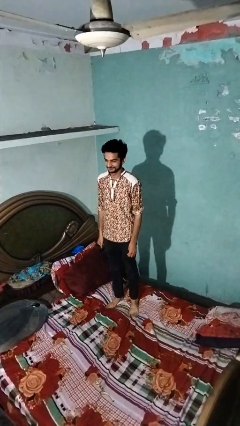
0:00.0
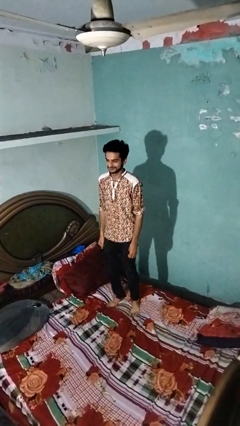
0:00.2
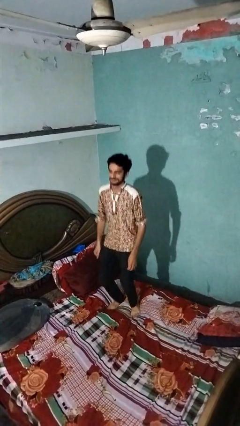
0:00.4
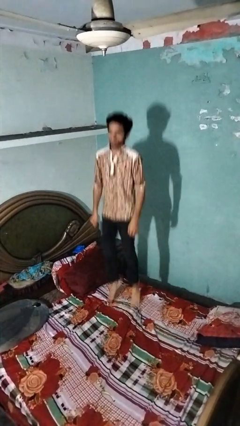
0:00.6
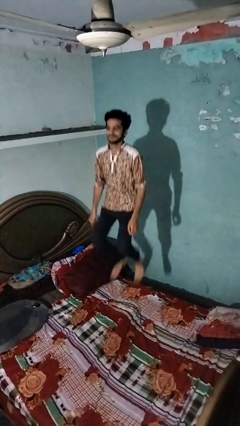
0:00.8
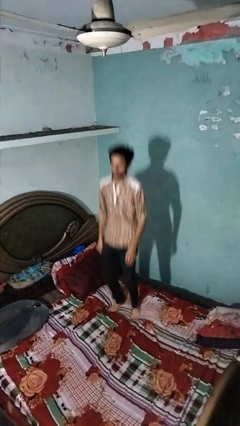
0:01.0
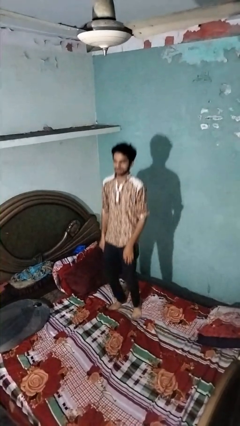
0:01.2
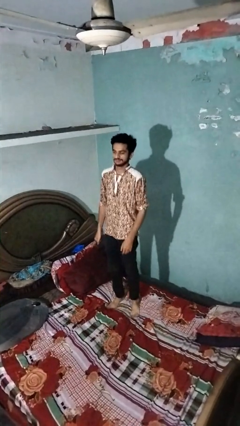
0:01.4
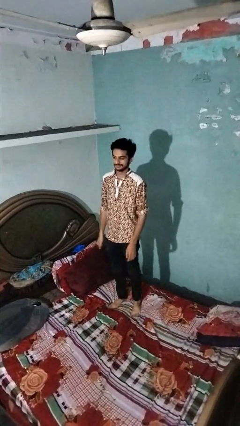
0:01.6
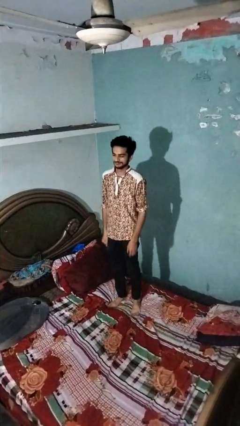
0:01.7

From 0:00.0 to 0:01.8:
person jumps on bed

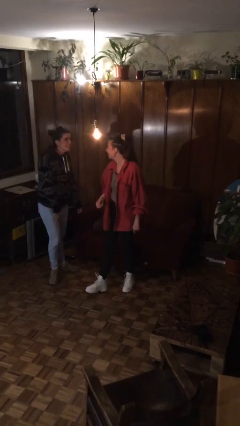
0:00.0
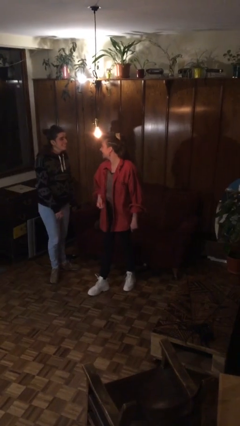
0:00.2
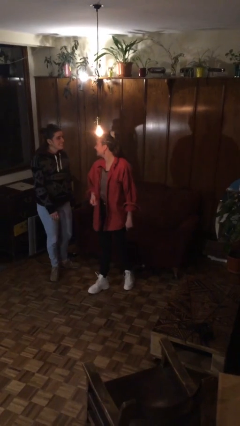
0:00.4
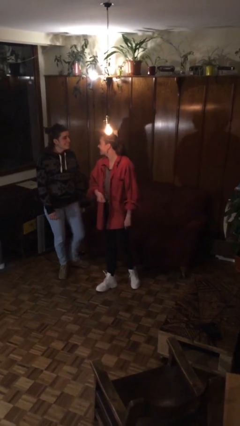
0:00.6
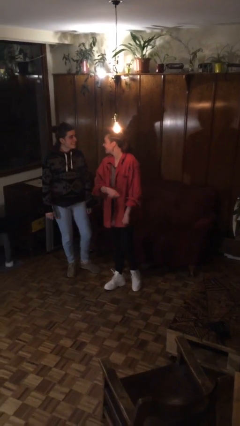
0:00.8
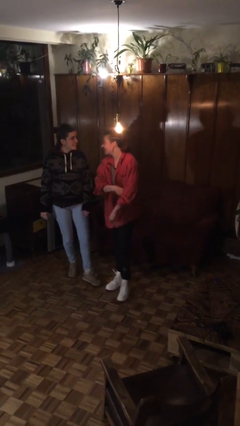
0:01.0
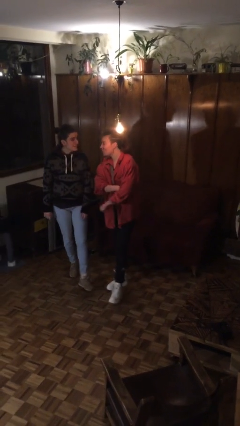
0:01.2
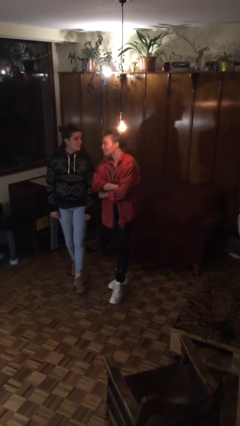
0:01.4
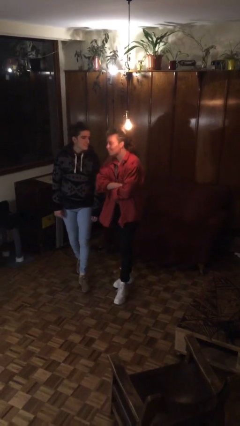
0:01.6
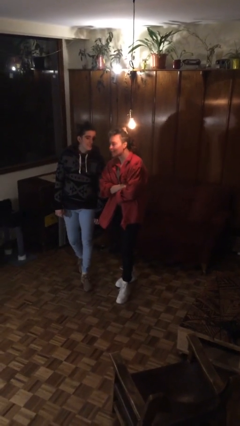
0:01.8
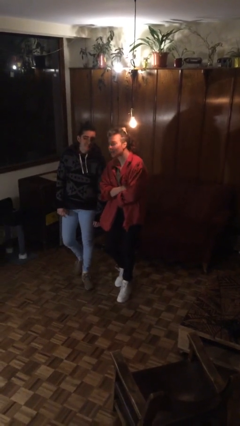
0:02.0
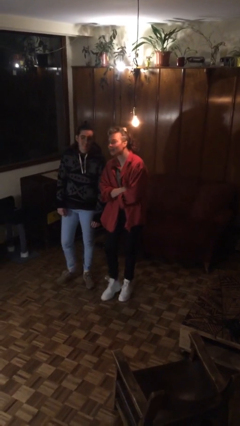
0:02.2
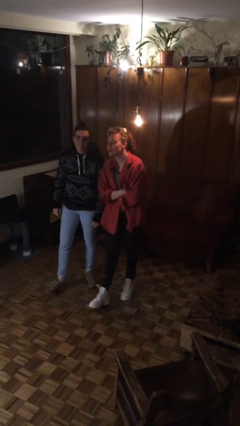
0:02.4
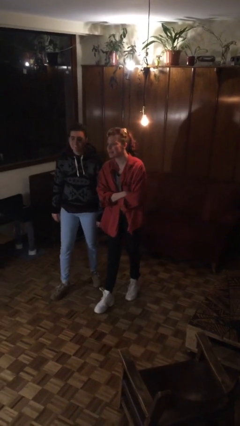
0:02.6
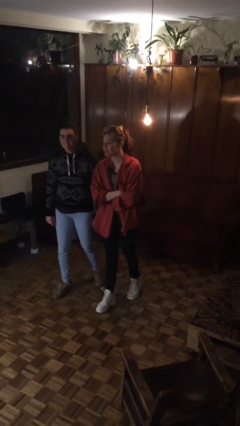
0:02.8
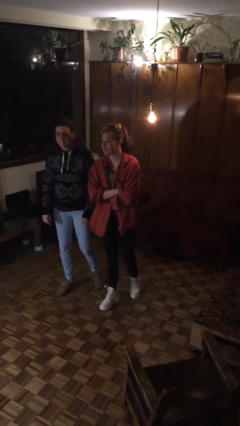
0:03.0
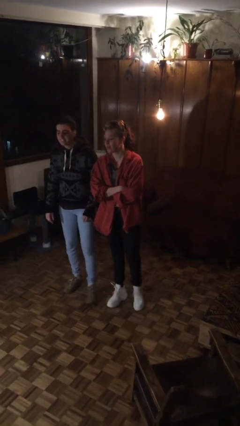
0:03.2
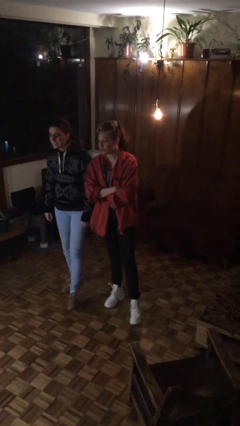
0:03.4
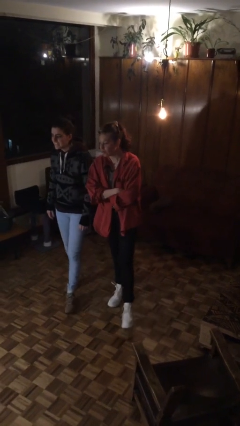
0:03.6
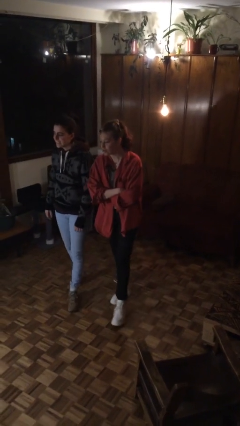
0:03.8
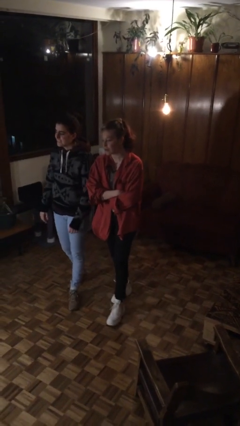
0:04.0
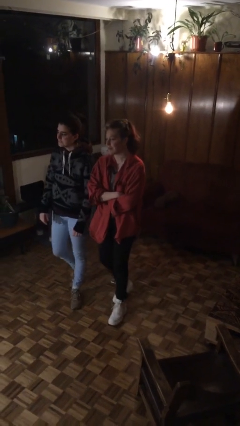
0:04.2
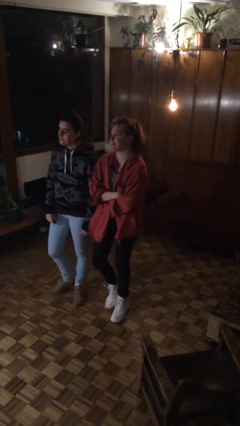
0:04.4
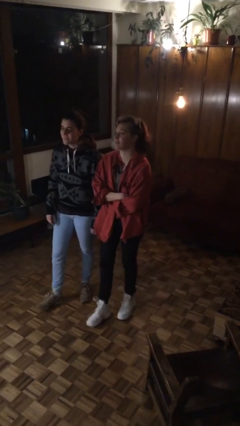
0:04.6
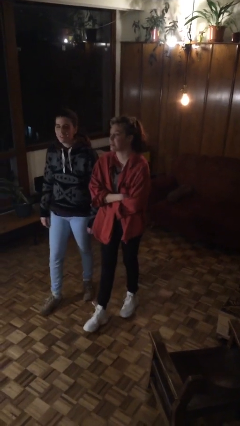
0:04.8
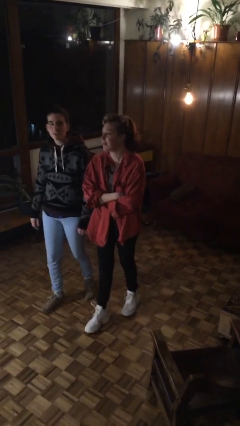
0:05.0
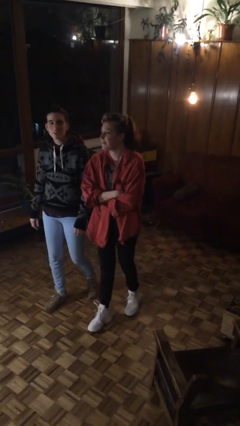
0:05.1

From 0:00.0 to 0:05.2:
person talks to person

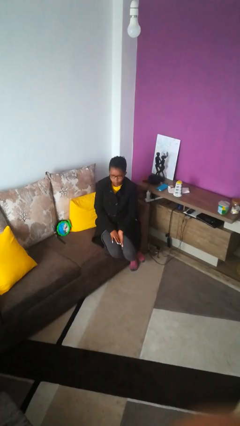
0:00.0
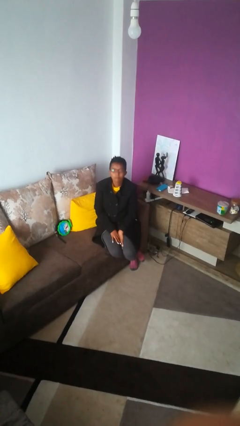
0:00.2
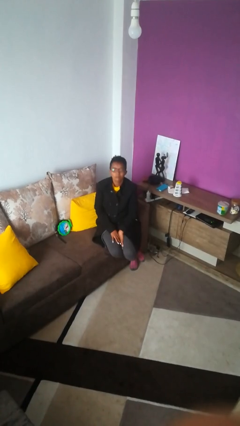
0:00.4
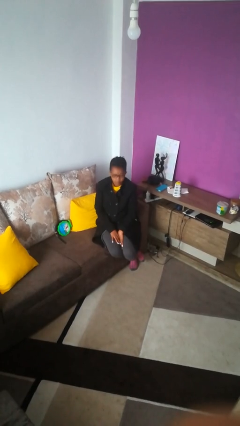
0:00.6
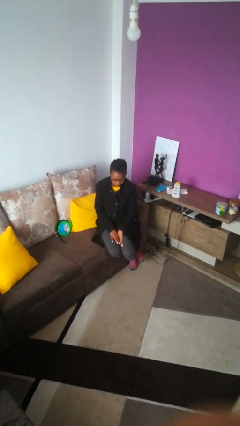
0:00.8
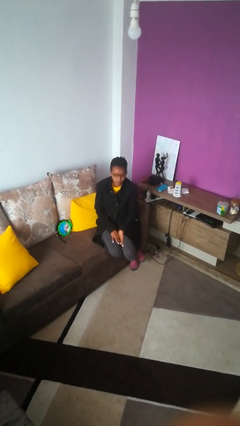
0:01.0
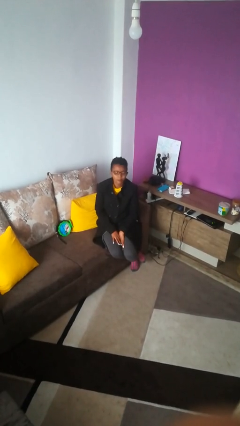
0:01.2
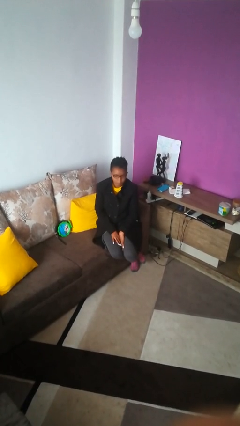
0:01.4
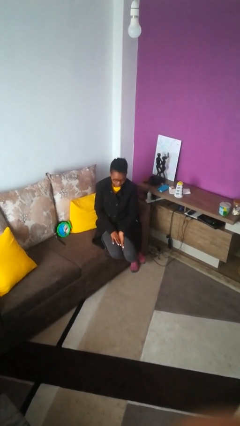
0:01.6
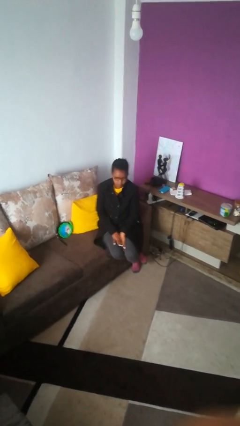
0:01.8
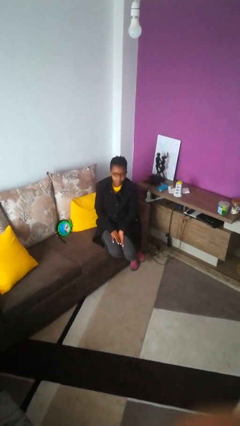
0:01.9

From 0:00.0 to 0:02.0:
person nods head

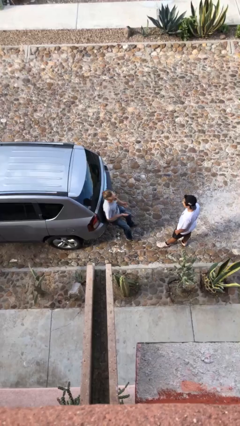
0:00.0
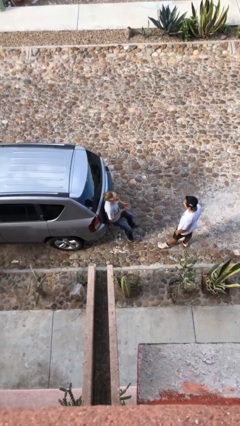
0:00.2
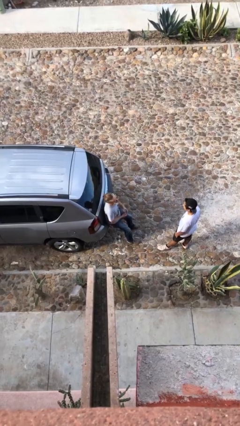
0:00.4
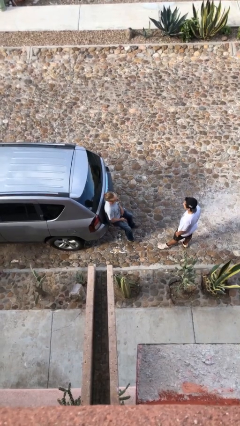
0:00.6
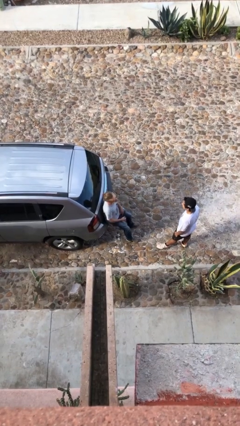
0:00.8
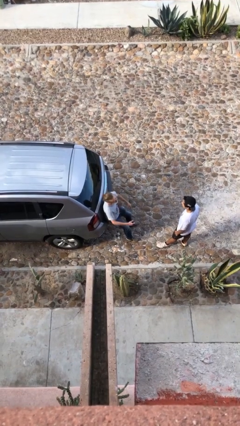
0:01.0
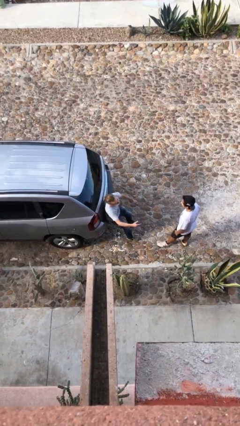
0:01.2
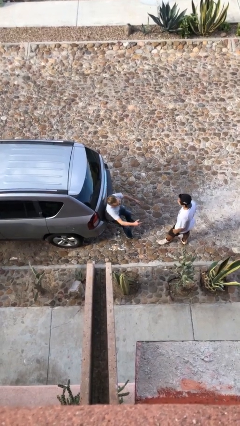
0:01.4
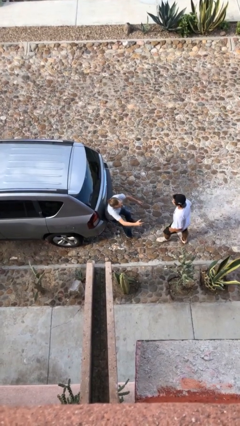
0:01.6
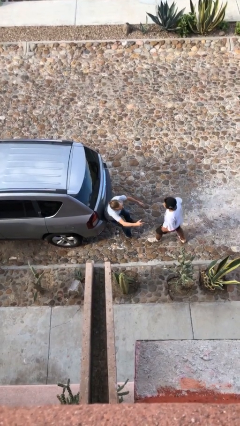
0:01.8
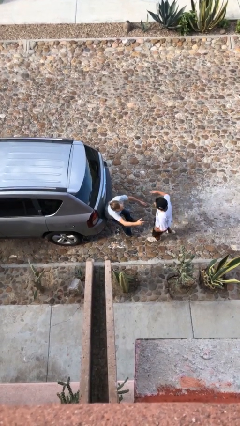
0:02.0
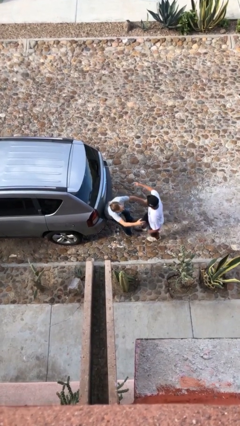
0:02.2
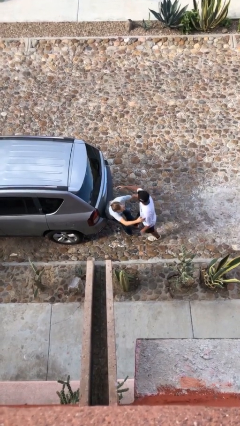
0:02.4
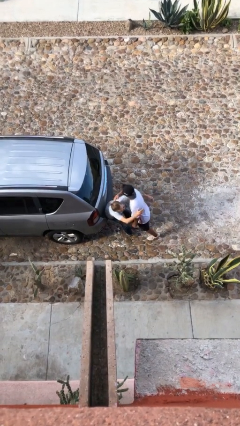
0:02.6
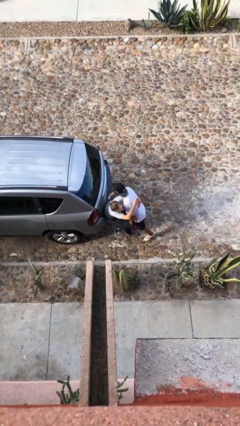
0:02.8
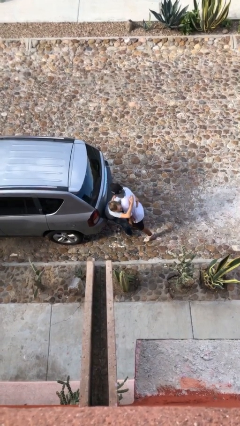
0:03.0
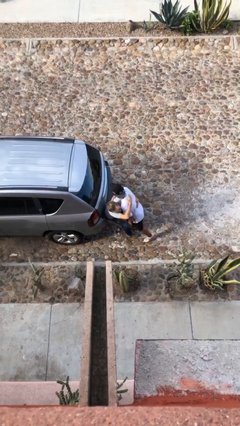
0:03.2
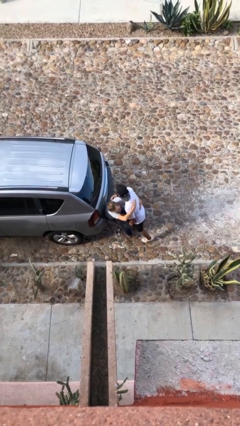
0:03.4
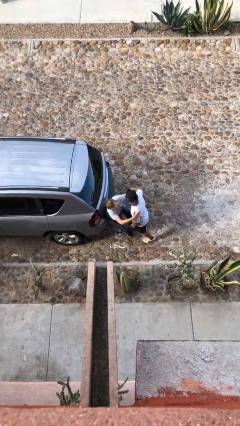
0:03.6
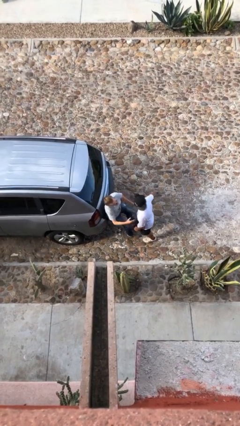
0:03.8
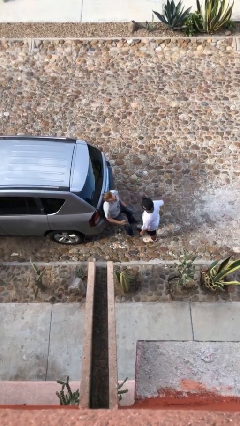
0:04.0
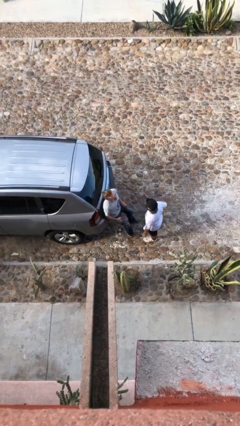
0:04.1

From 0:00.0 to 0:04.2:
person embraces person

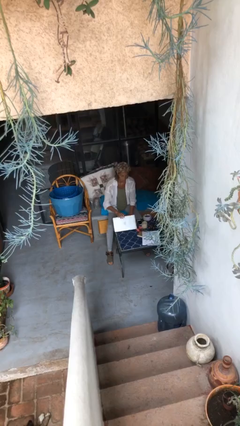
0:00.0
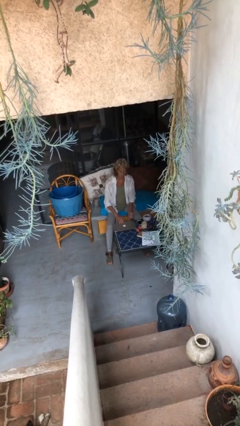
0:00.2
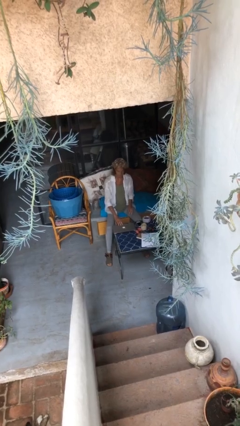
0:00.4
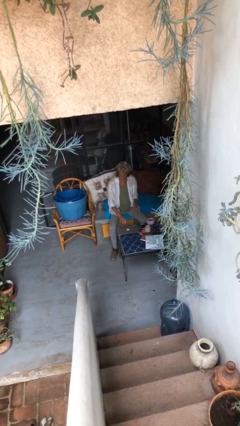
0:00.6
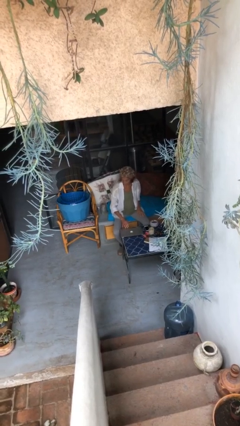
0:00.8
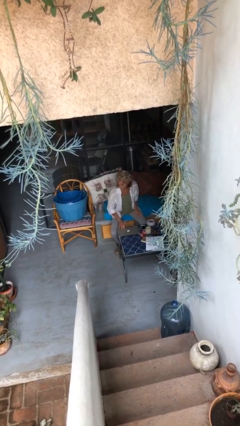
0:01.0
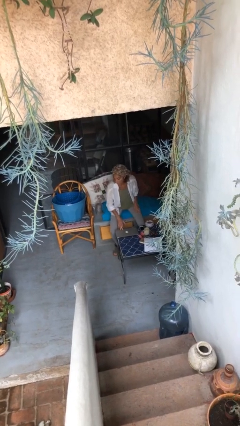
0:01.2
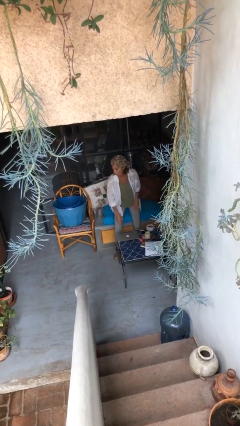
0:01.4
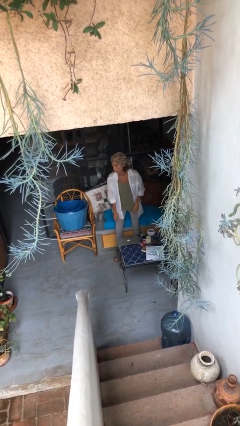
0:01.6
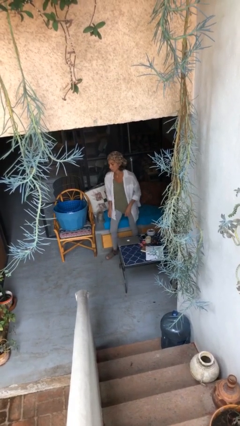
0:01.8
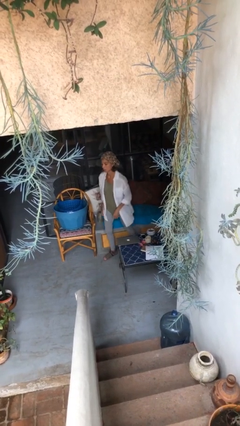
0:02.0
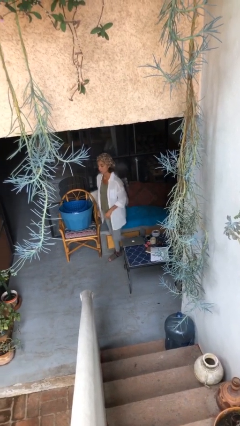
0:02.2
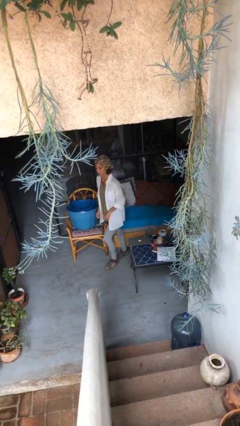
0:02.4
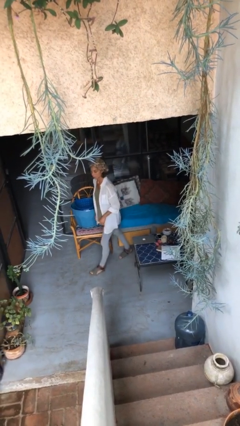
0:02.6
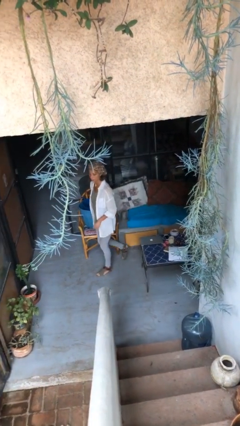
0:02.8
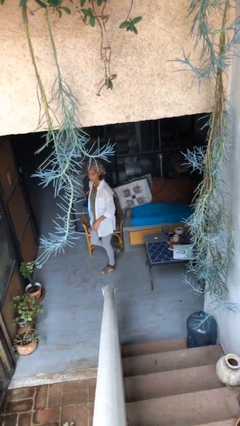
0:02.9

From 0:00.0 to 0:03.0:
person stands up

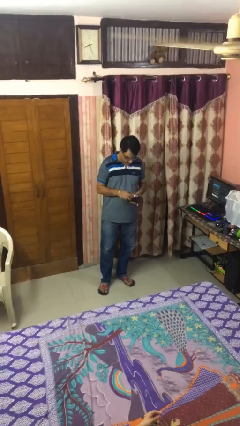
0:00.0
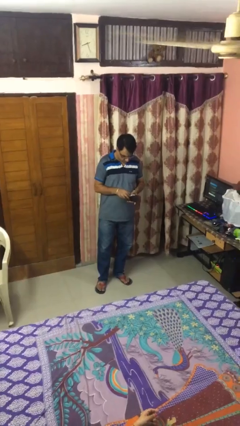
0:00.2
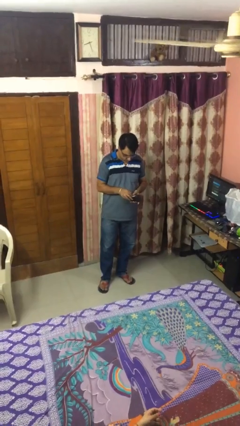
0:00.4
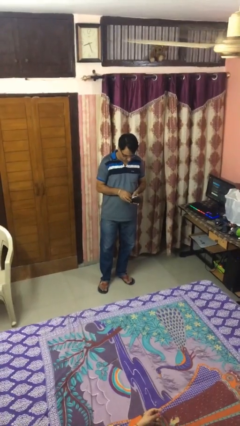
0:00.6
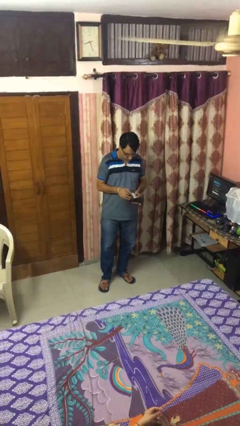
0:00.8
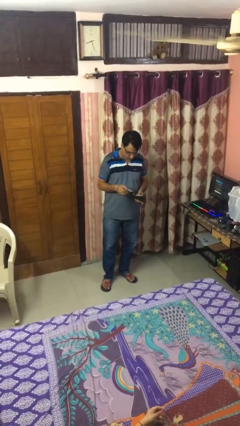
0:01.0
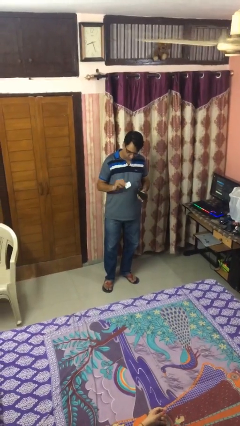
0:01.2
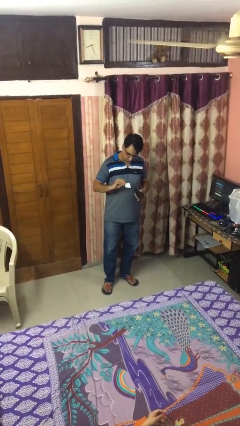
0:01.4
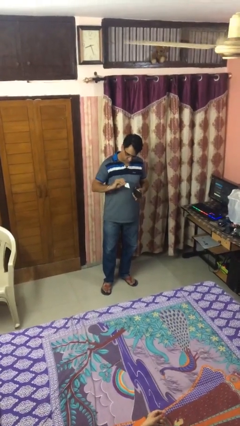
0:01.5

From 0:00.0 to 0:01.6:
person takes object from purse
